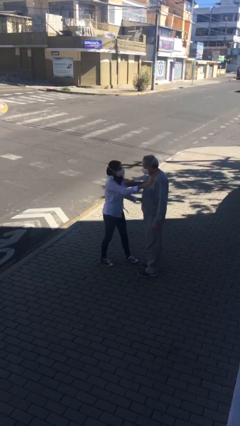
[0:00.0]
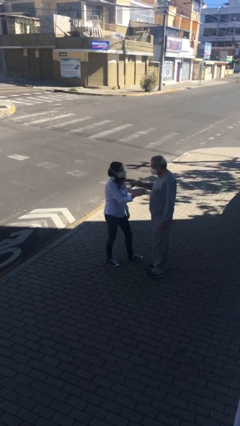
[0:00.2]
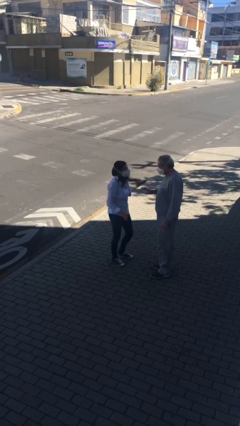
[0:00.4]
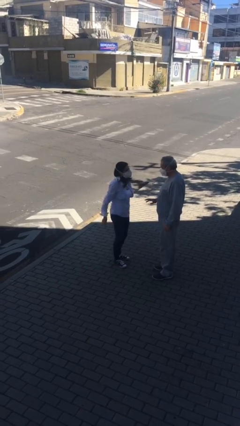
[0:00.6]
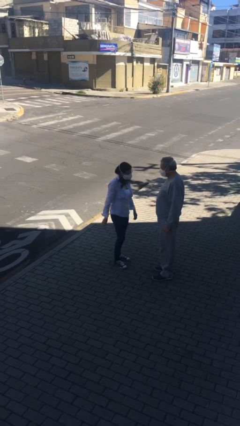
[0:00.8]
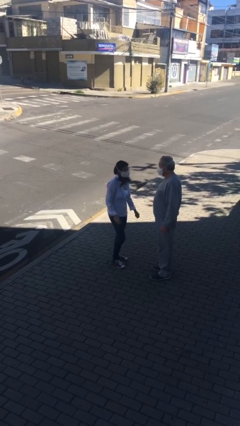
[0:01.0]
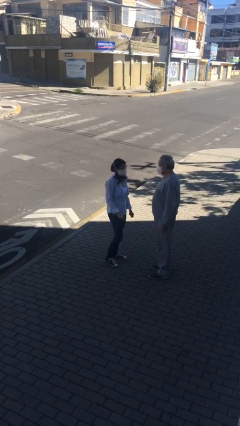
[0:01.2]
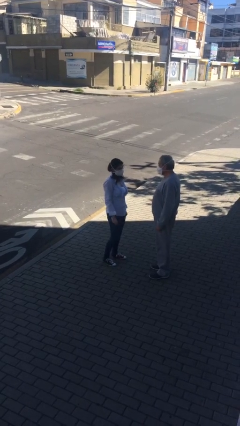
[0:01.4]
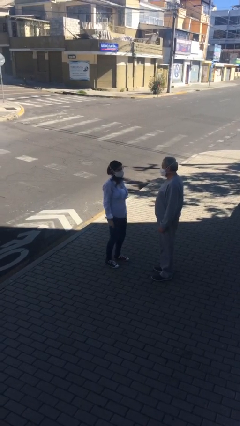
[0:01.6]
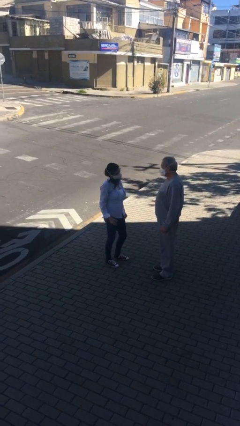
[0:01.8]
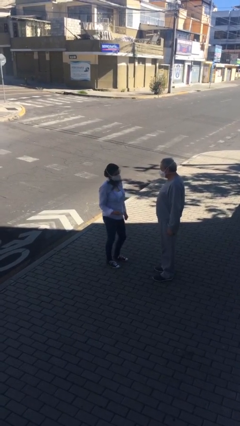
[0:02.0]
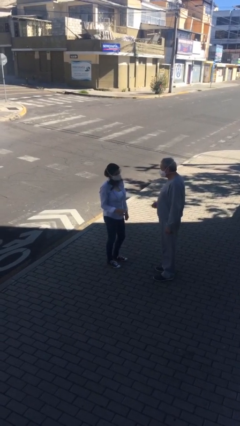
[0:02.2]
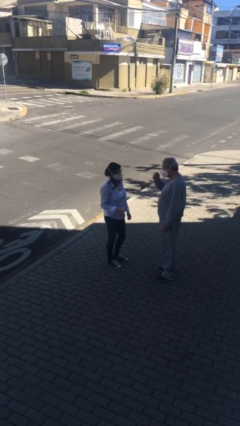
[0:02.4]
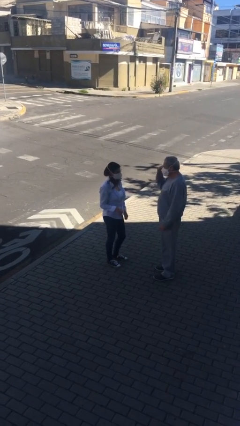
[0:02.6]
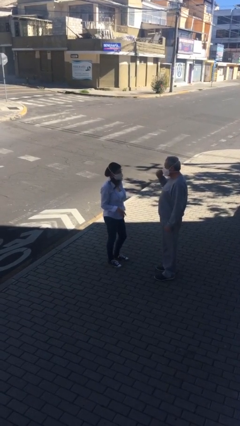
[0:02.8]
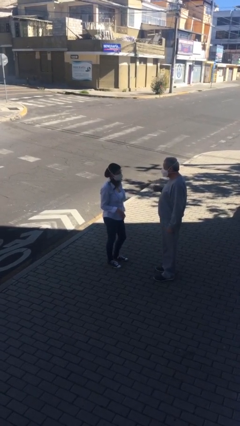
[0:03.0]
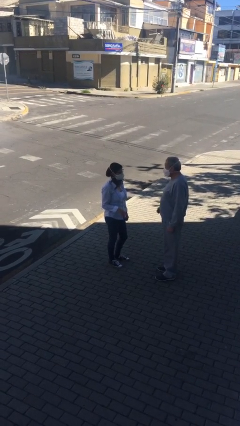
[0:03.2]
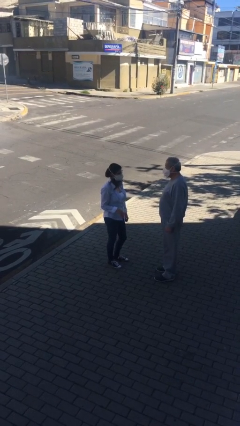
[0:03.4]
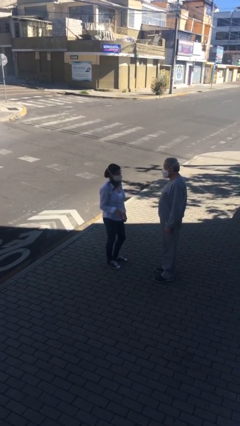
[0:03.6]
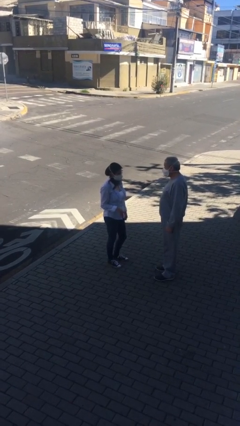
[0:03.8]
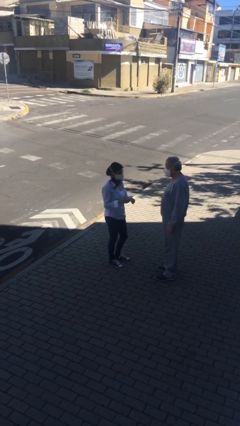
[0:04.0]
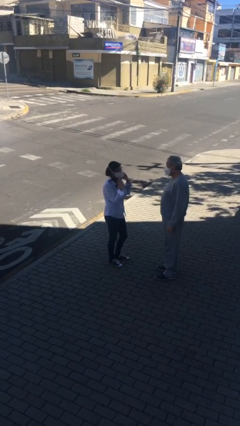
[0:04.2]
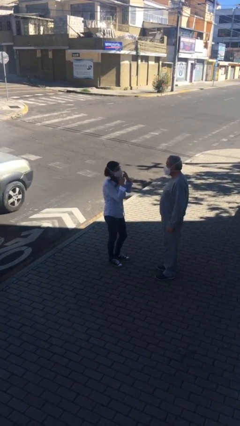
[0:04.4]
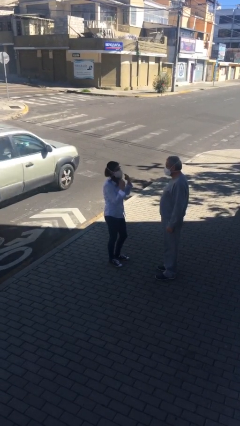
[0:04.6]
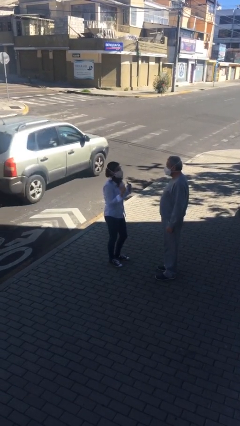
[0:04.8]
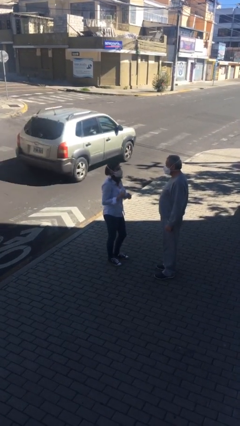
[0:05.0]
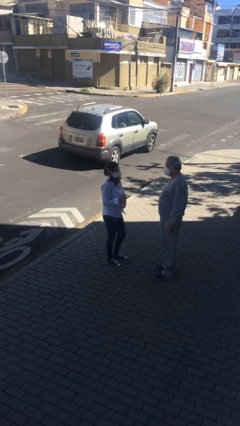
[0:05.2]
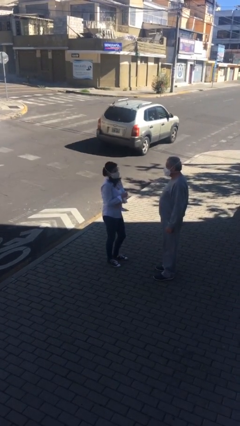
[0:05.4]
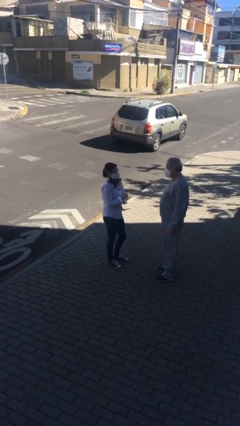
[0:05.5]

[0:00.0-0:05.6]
person talks to person

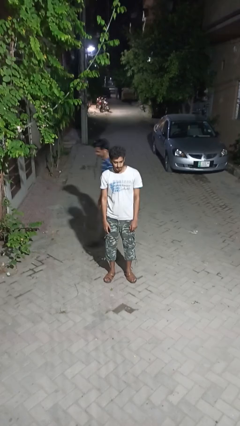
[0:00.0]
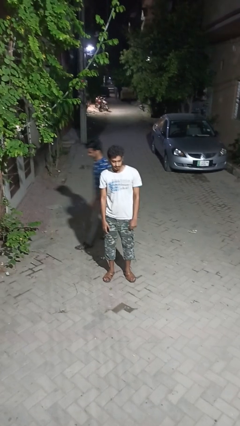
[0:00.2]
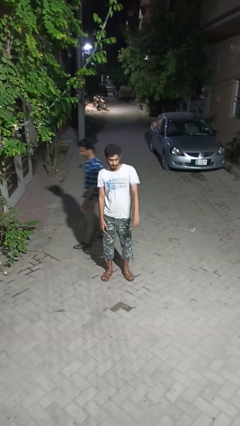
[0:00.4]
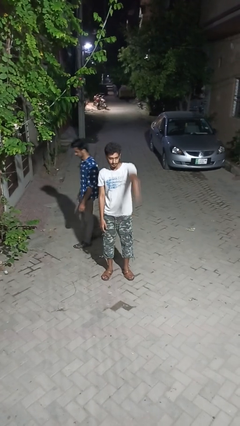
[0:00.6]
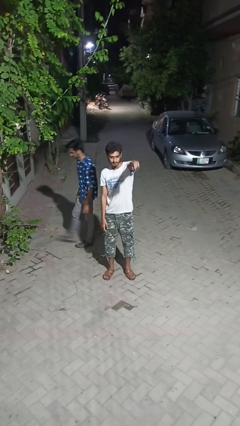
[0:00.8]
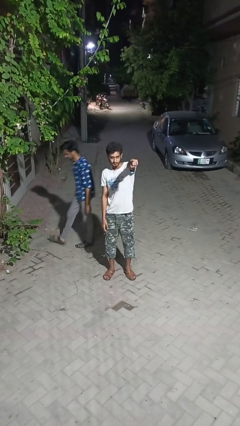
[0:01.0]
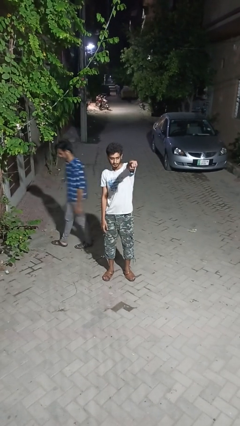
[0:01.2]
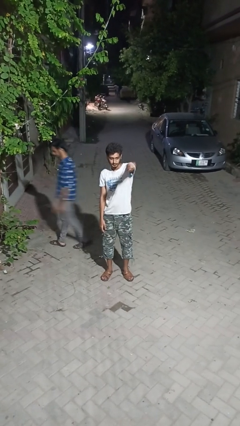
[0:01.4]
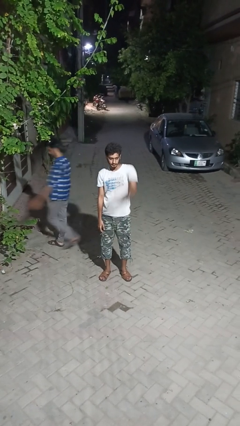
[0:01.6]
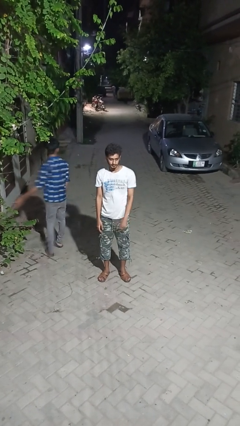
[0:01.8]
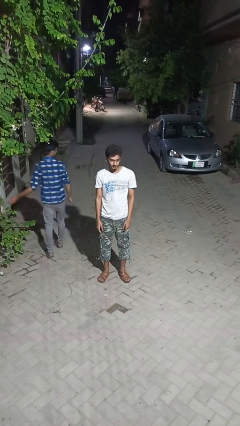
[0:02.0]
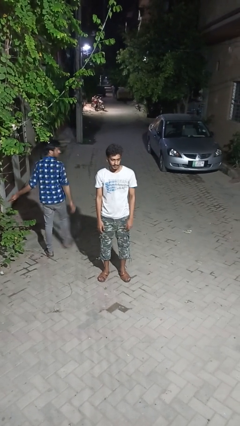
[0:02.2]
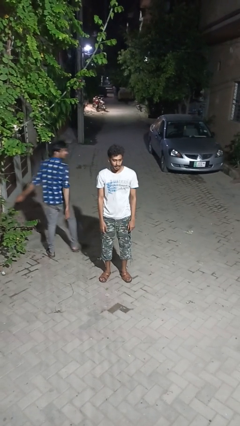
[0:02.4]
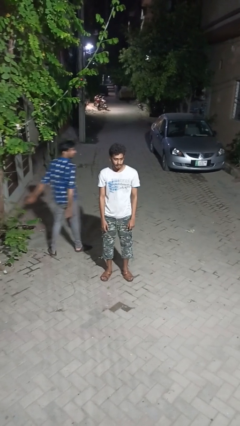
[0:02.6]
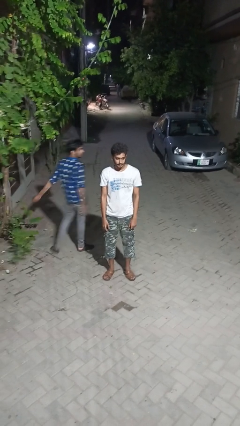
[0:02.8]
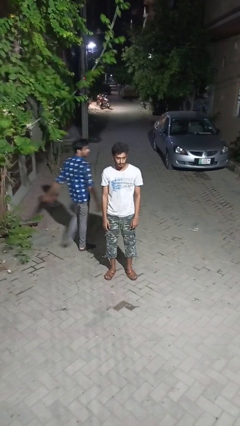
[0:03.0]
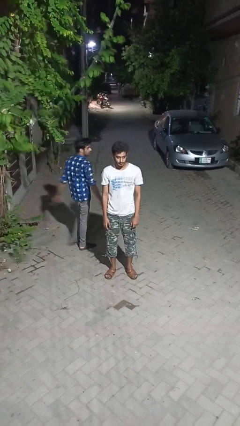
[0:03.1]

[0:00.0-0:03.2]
person points at person

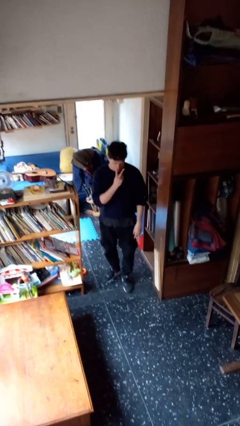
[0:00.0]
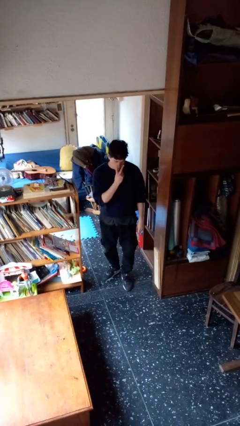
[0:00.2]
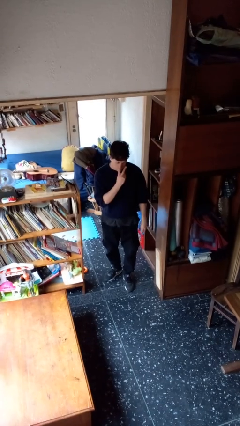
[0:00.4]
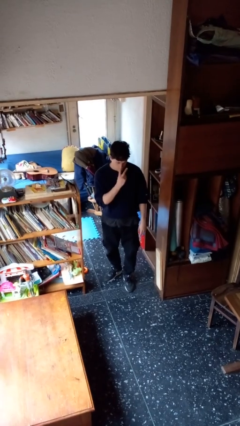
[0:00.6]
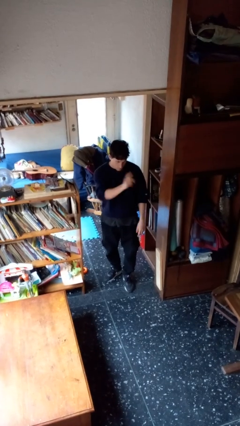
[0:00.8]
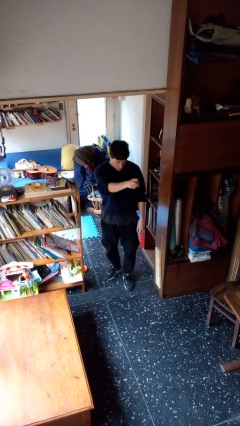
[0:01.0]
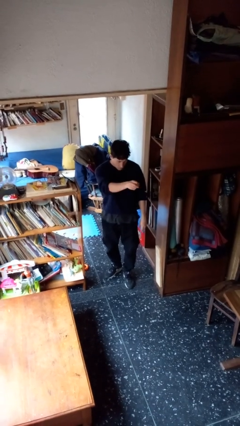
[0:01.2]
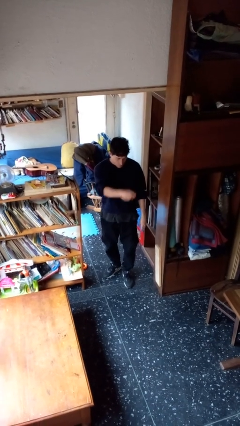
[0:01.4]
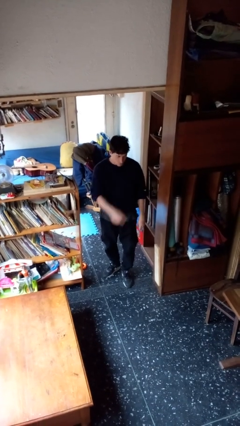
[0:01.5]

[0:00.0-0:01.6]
person gestures watch closely

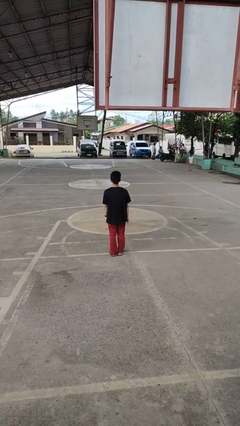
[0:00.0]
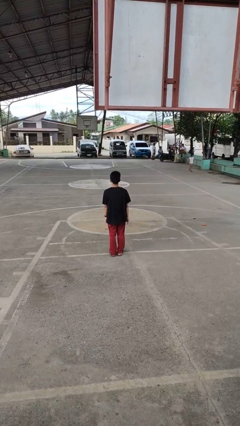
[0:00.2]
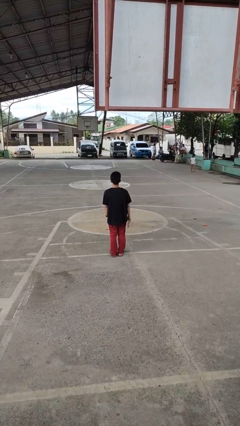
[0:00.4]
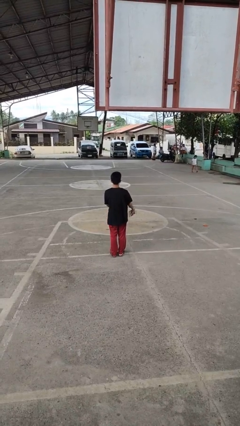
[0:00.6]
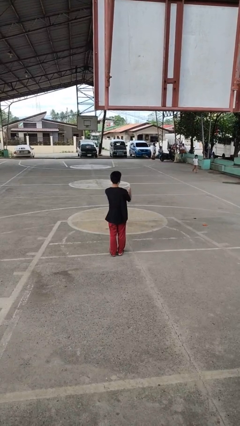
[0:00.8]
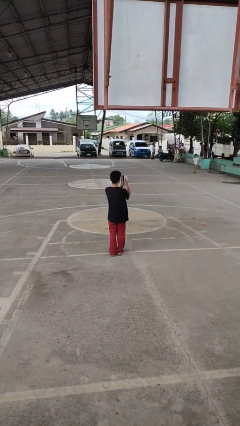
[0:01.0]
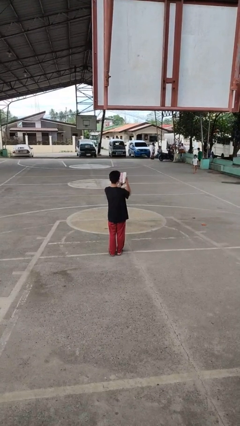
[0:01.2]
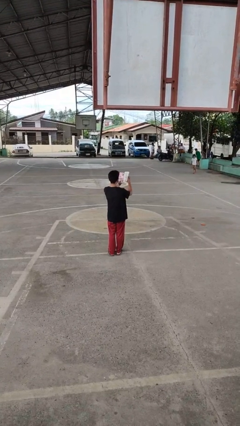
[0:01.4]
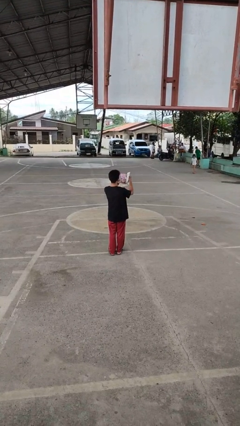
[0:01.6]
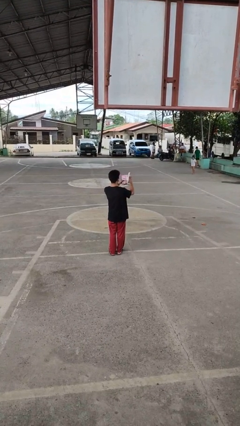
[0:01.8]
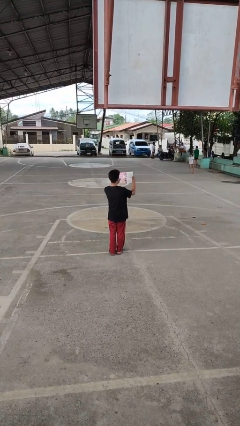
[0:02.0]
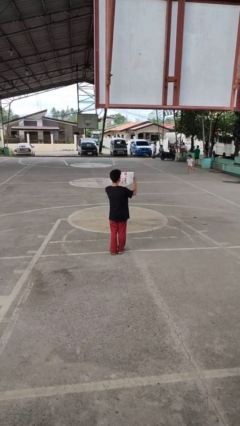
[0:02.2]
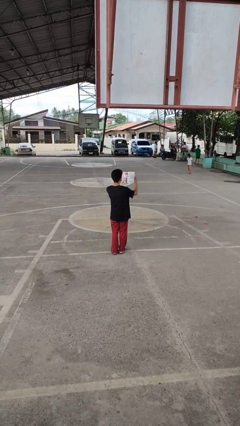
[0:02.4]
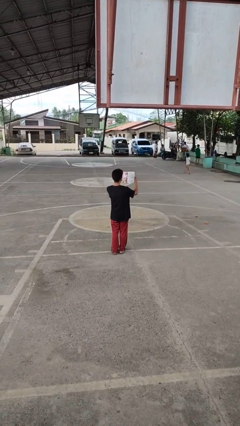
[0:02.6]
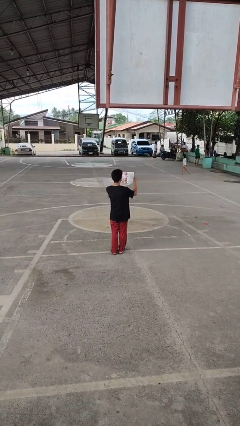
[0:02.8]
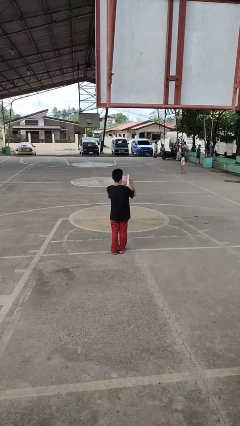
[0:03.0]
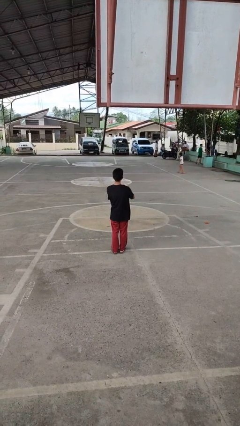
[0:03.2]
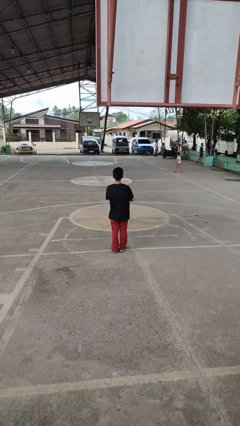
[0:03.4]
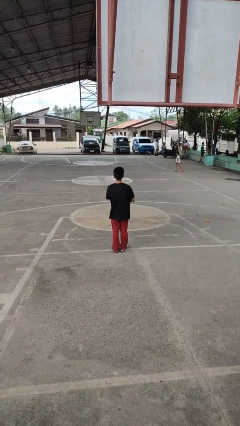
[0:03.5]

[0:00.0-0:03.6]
person reads magazine

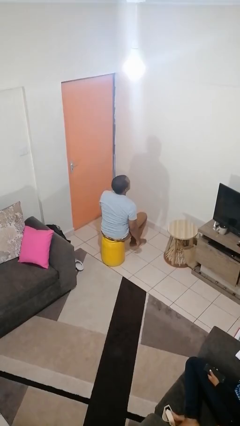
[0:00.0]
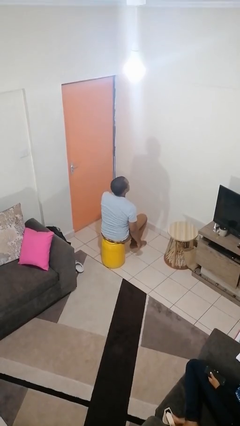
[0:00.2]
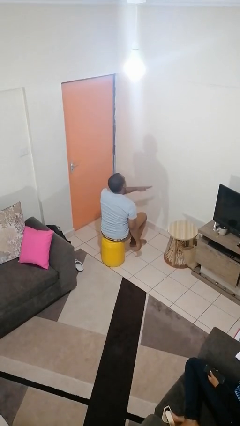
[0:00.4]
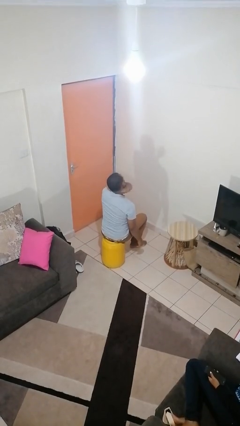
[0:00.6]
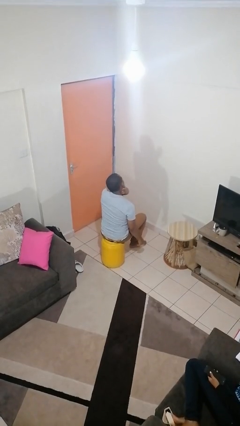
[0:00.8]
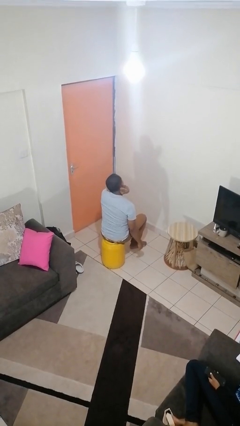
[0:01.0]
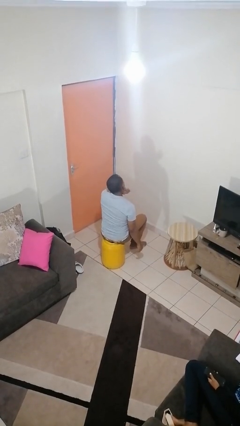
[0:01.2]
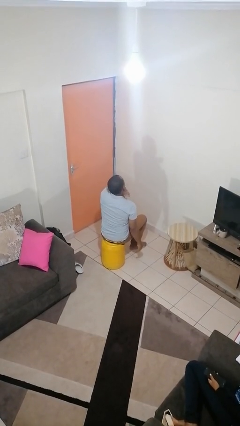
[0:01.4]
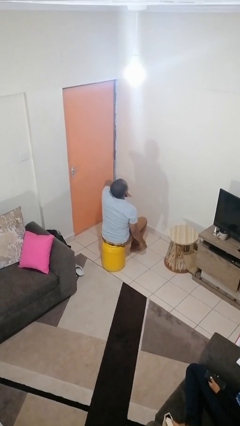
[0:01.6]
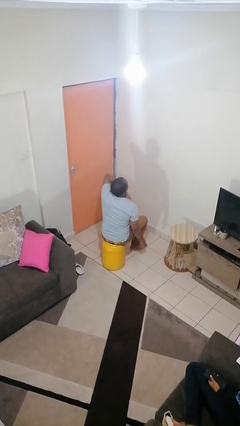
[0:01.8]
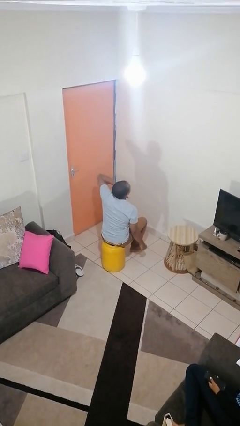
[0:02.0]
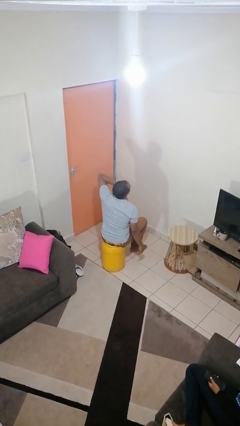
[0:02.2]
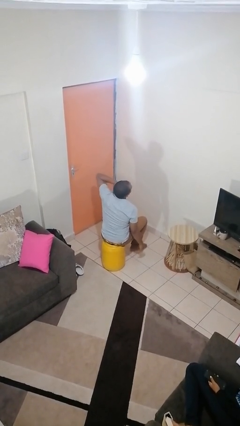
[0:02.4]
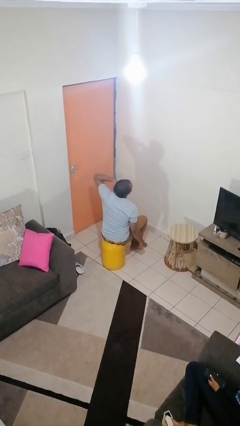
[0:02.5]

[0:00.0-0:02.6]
person gestures cut

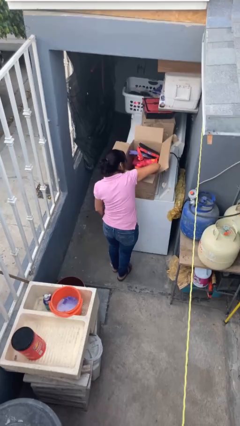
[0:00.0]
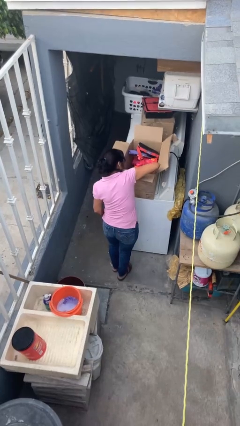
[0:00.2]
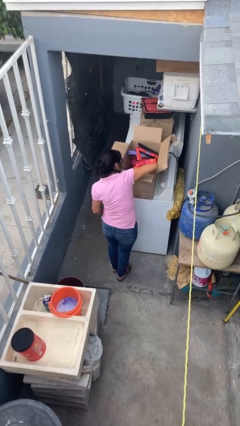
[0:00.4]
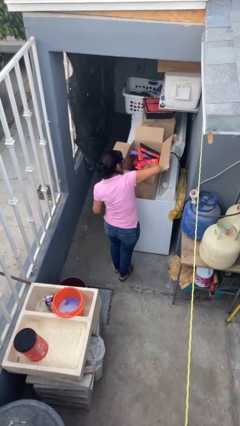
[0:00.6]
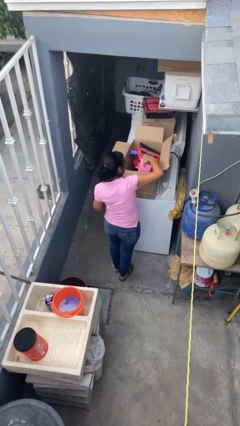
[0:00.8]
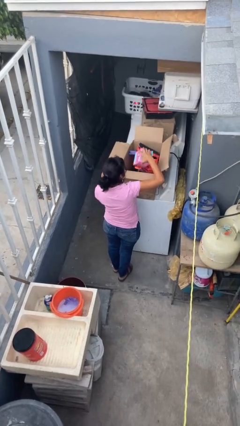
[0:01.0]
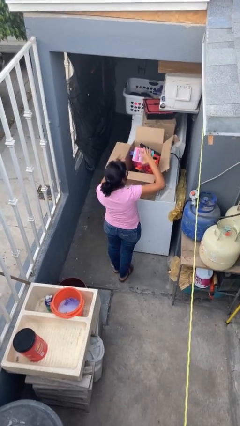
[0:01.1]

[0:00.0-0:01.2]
person takes object from box
